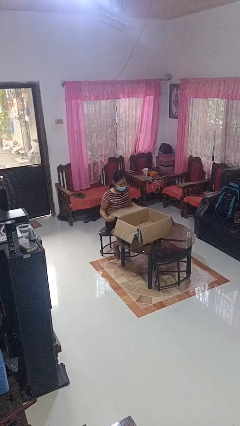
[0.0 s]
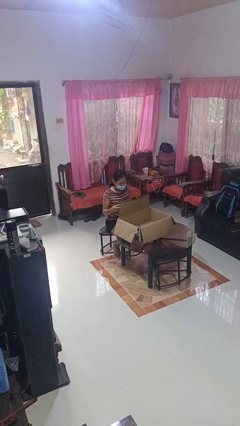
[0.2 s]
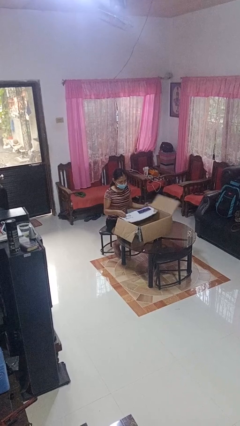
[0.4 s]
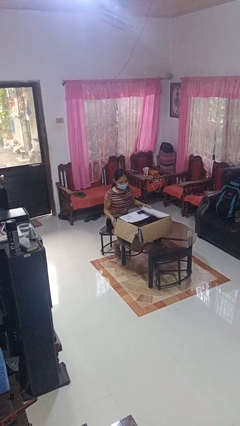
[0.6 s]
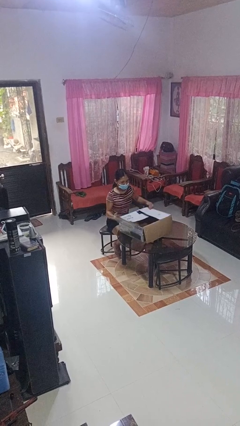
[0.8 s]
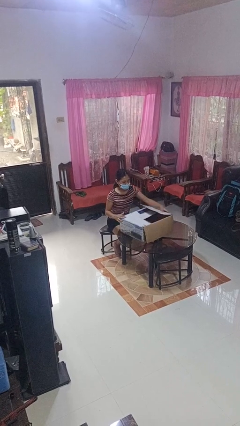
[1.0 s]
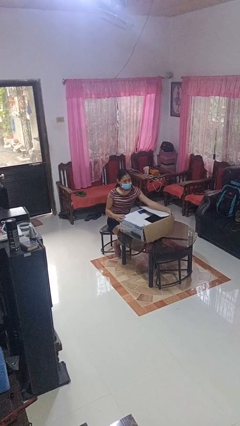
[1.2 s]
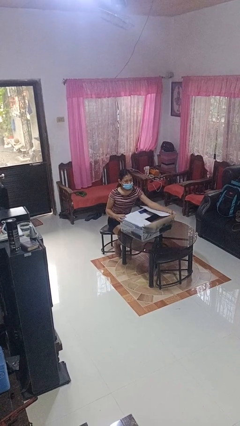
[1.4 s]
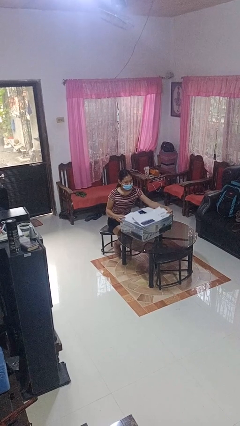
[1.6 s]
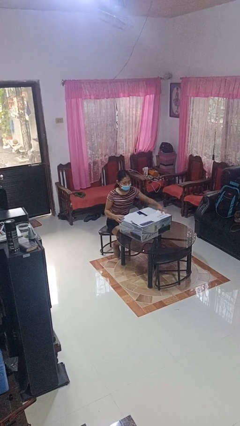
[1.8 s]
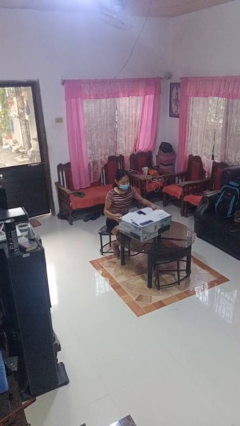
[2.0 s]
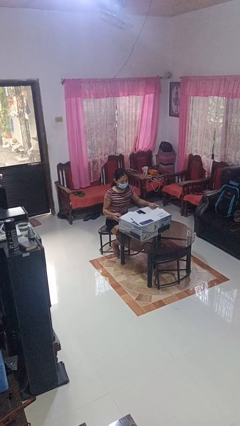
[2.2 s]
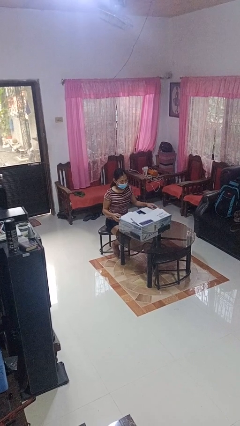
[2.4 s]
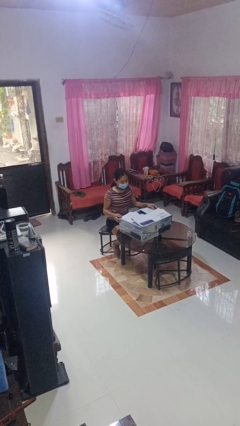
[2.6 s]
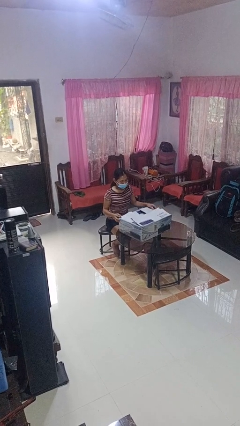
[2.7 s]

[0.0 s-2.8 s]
person closes box

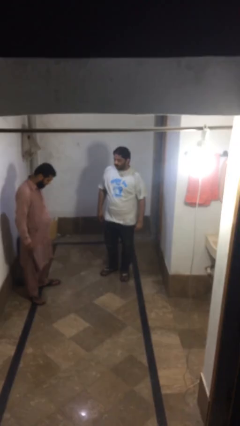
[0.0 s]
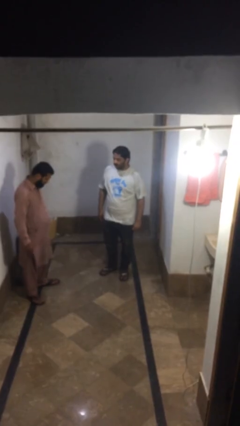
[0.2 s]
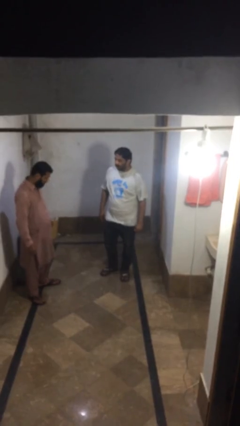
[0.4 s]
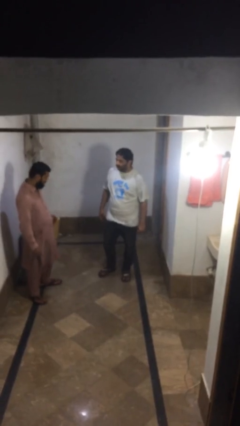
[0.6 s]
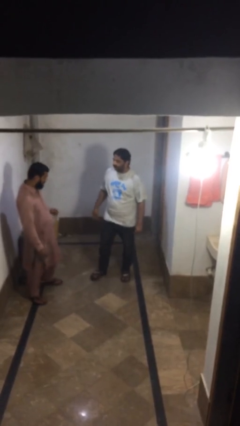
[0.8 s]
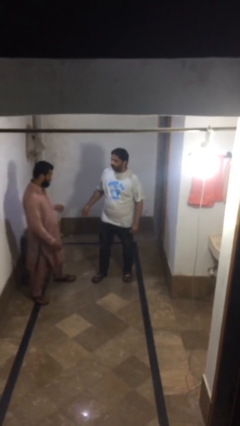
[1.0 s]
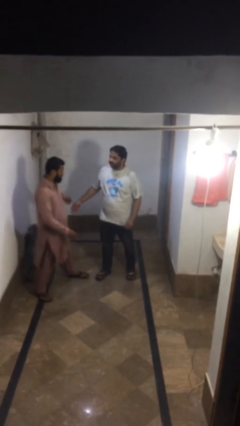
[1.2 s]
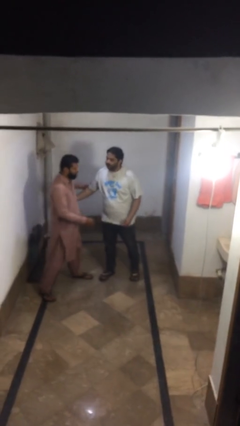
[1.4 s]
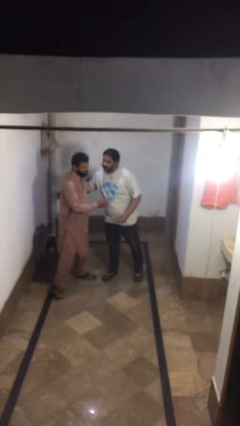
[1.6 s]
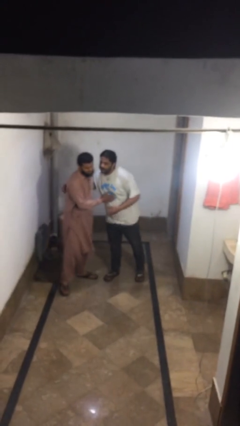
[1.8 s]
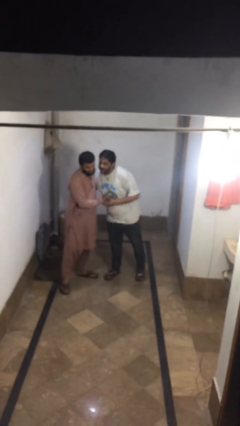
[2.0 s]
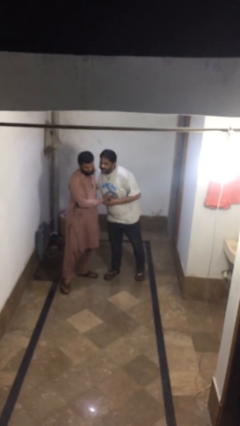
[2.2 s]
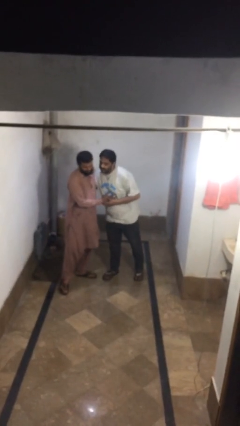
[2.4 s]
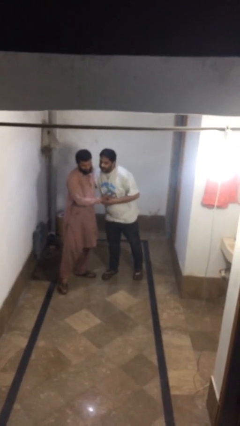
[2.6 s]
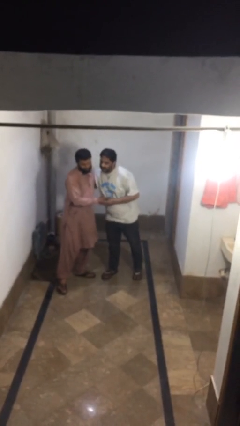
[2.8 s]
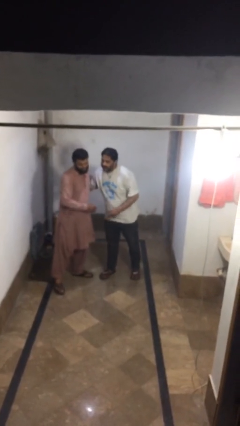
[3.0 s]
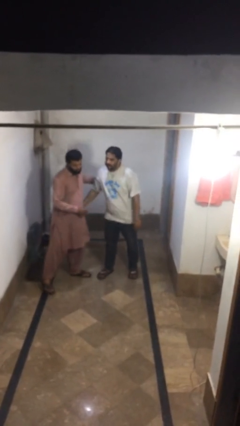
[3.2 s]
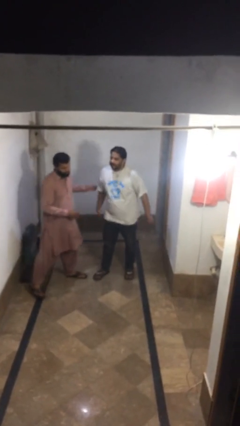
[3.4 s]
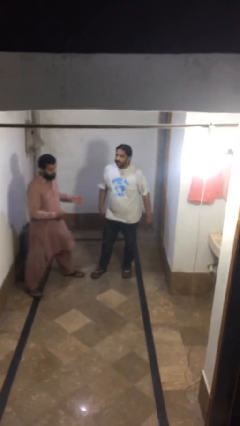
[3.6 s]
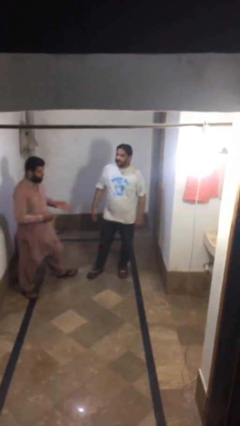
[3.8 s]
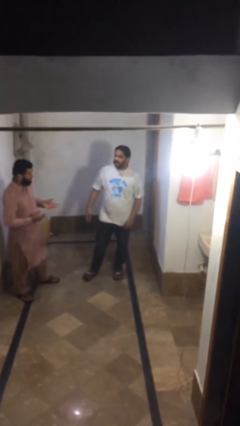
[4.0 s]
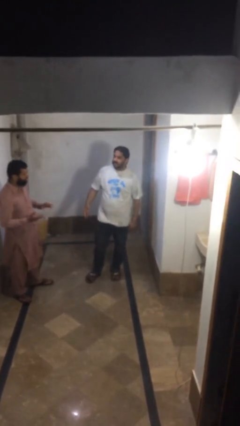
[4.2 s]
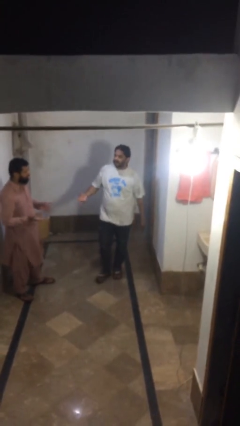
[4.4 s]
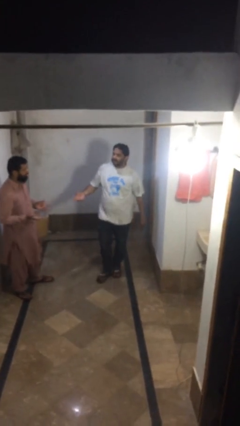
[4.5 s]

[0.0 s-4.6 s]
person embraces person

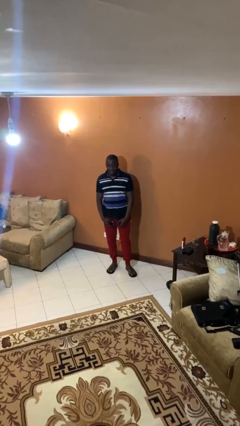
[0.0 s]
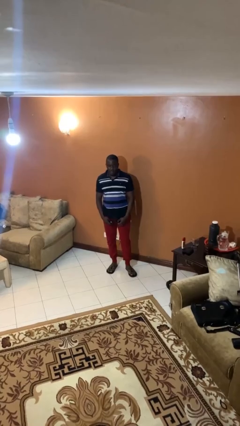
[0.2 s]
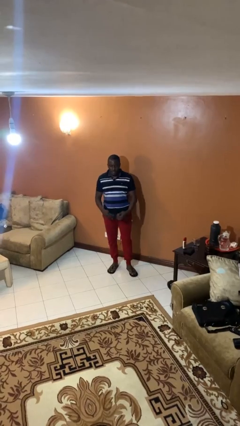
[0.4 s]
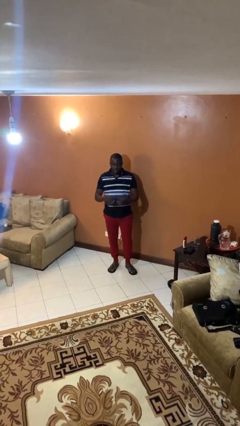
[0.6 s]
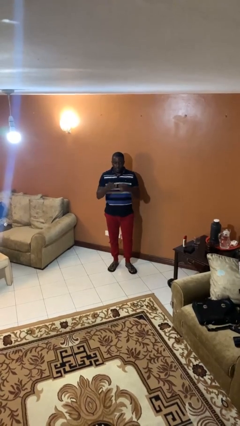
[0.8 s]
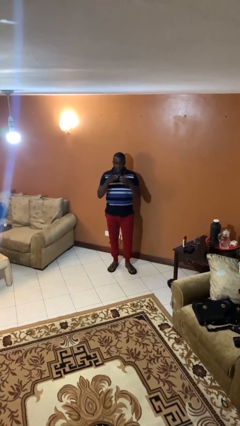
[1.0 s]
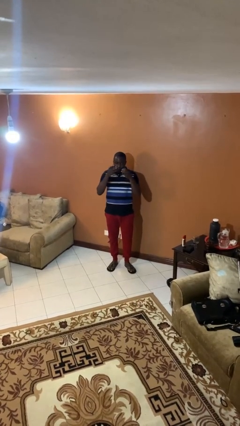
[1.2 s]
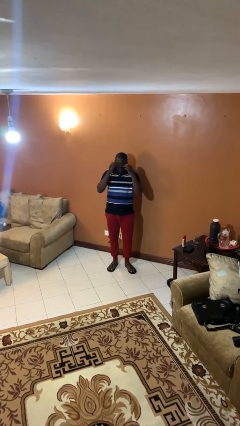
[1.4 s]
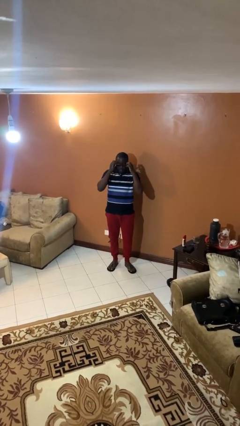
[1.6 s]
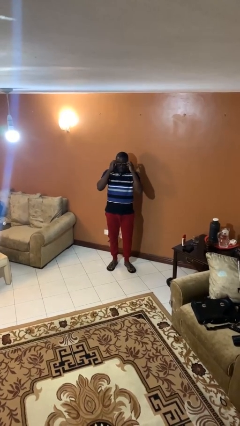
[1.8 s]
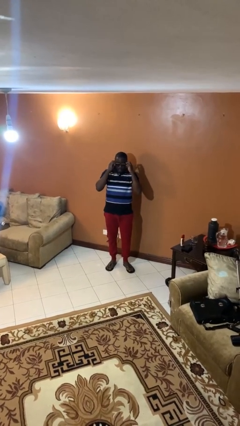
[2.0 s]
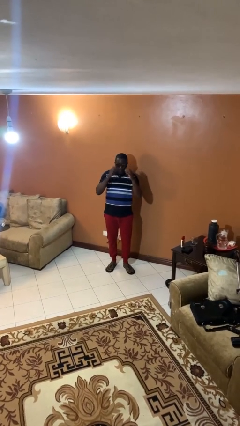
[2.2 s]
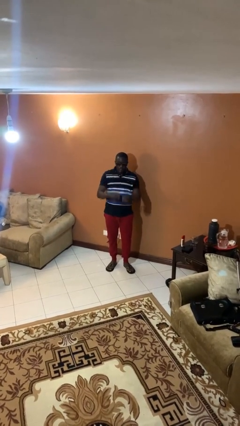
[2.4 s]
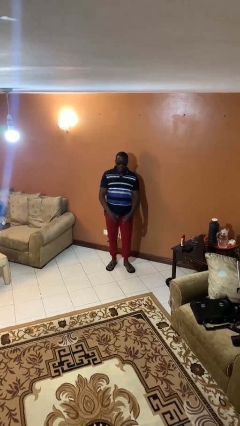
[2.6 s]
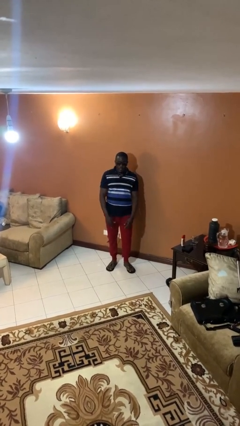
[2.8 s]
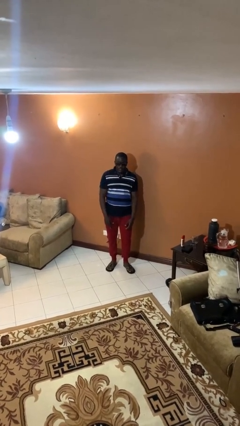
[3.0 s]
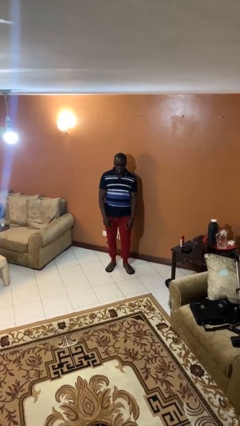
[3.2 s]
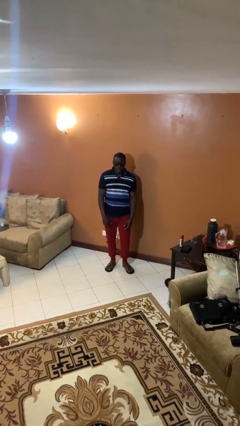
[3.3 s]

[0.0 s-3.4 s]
person puts on sunglasses

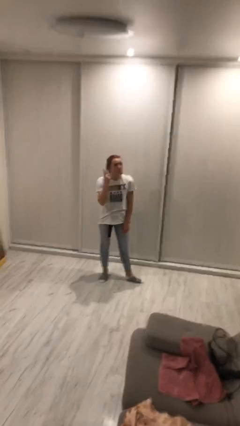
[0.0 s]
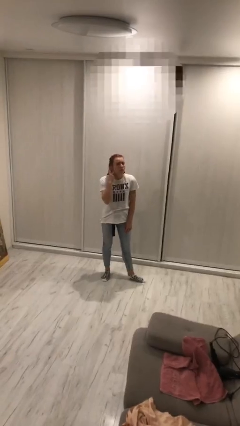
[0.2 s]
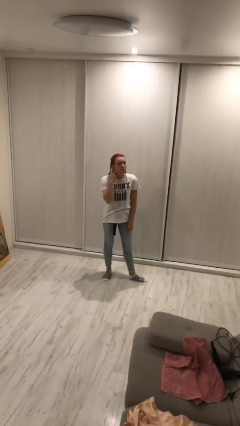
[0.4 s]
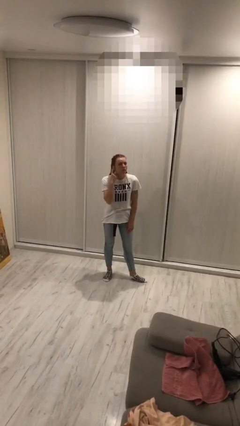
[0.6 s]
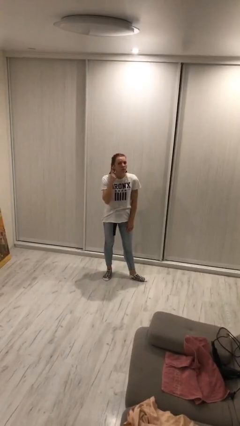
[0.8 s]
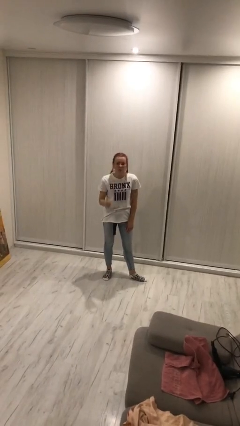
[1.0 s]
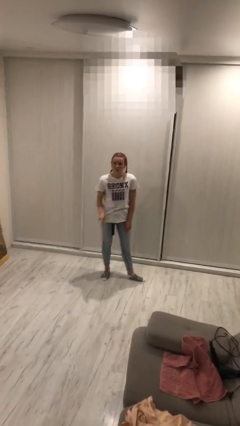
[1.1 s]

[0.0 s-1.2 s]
person gestures listen closely

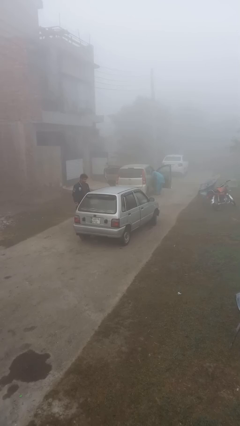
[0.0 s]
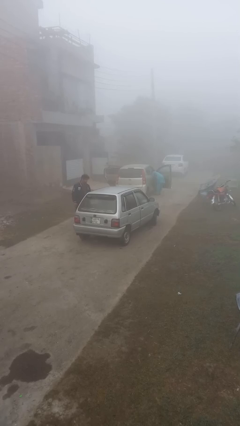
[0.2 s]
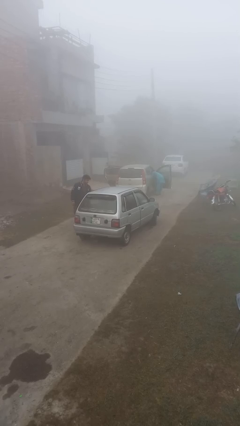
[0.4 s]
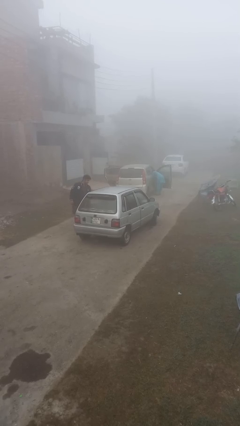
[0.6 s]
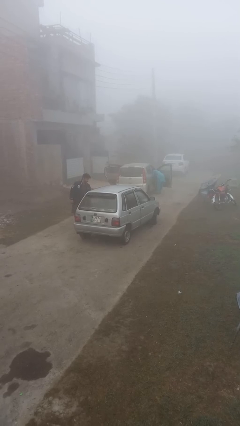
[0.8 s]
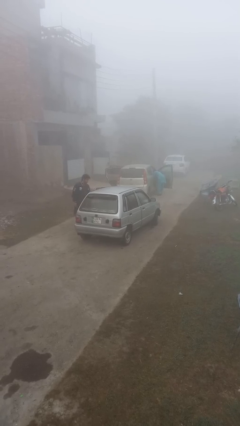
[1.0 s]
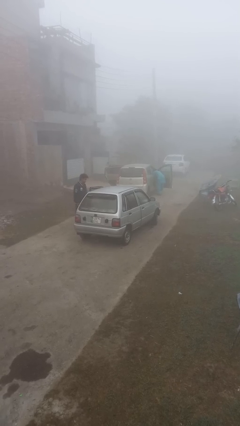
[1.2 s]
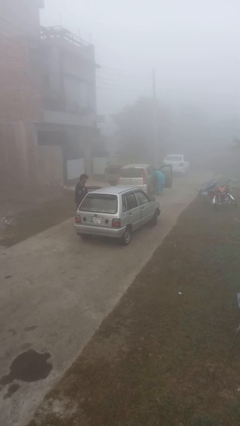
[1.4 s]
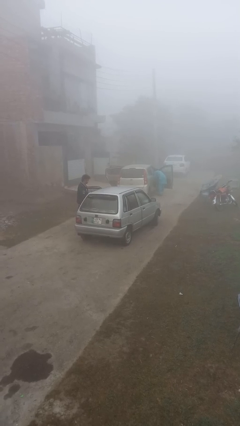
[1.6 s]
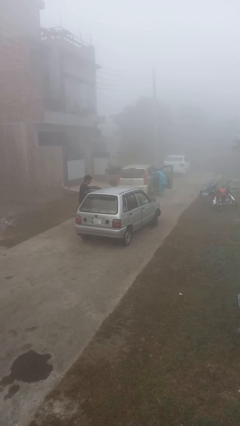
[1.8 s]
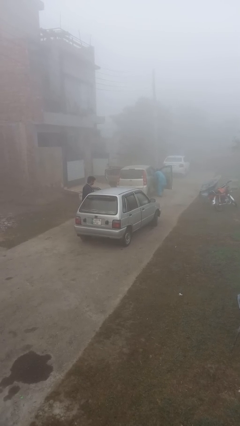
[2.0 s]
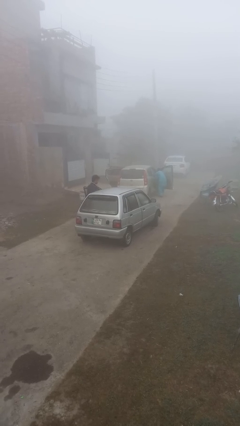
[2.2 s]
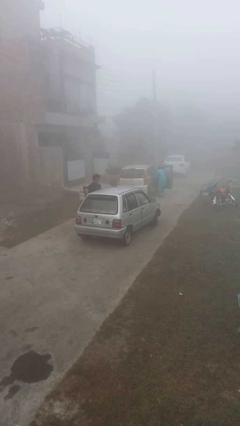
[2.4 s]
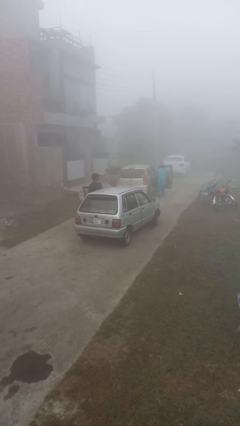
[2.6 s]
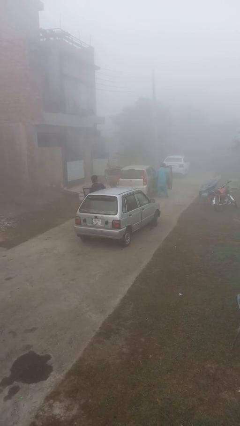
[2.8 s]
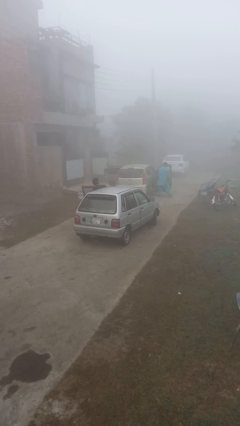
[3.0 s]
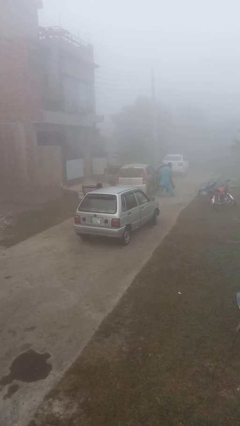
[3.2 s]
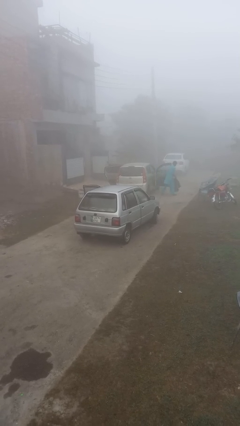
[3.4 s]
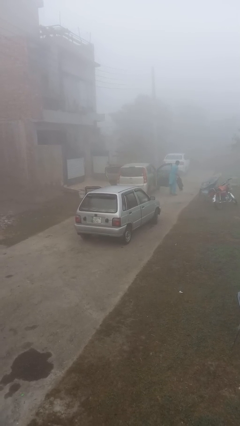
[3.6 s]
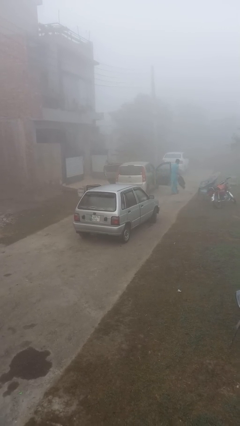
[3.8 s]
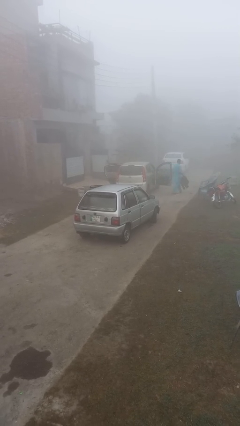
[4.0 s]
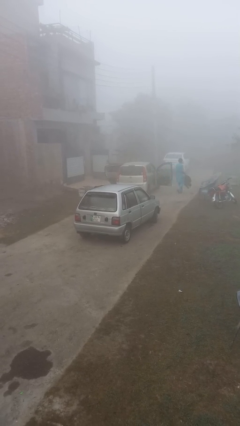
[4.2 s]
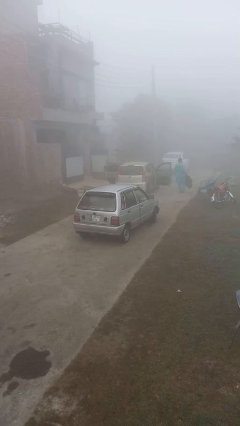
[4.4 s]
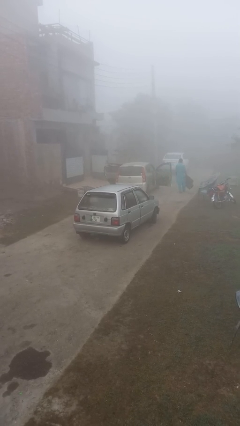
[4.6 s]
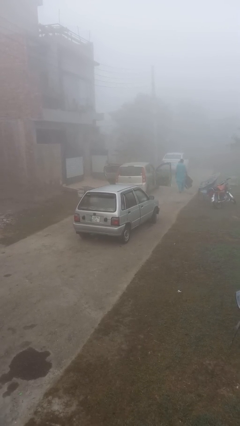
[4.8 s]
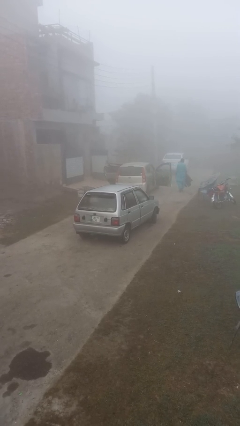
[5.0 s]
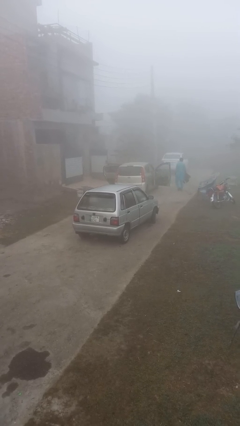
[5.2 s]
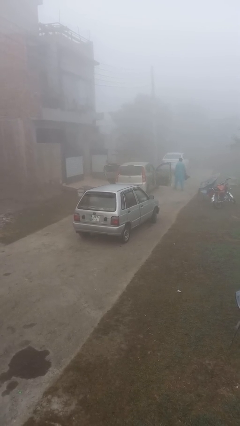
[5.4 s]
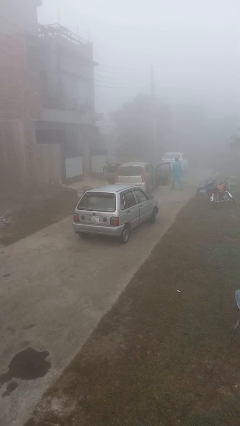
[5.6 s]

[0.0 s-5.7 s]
car picks up person
